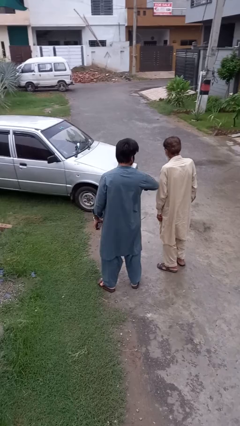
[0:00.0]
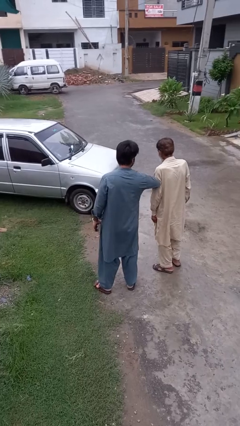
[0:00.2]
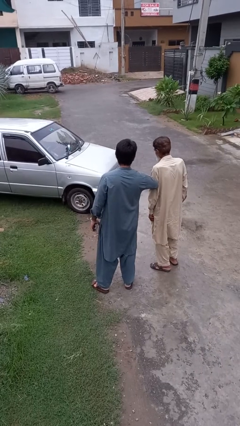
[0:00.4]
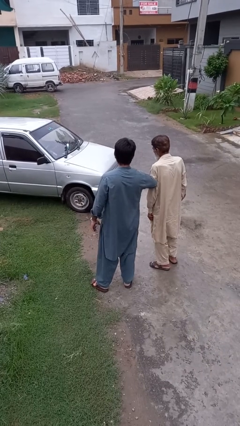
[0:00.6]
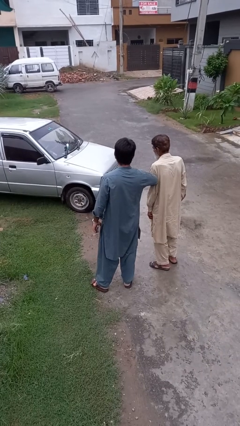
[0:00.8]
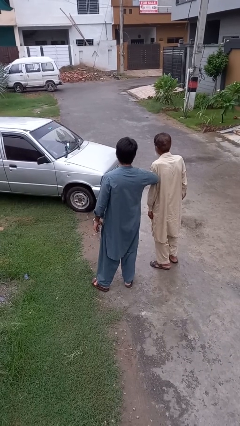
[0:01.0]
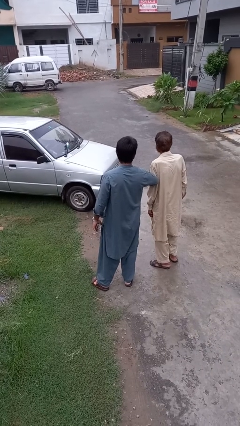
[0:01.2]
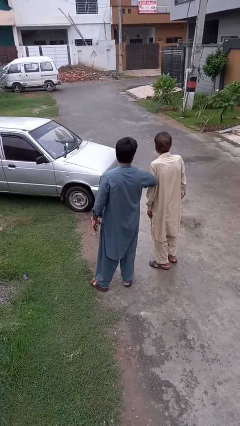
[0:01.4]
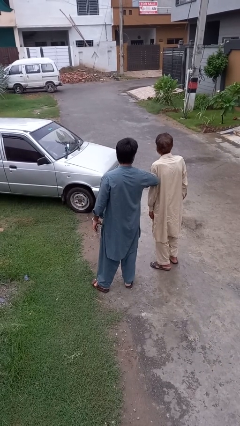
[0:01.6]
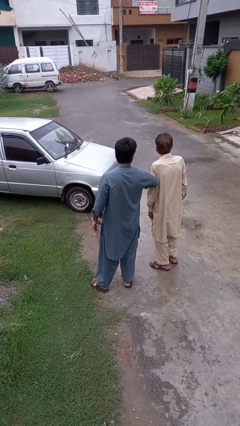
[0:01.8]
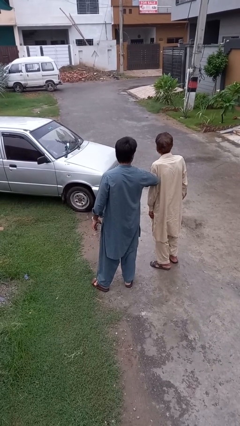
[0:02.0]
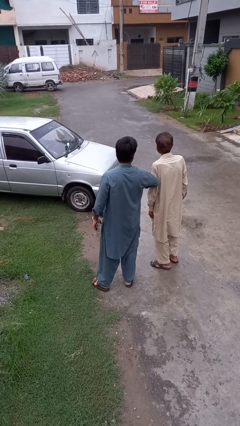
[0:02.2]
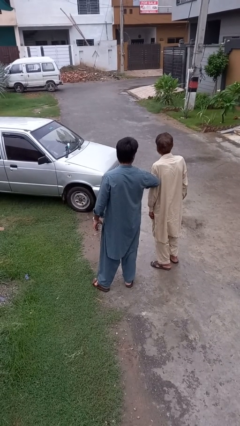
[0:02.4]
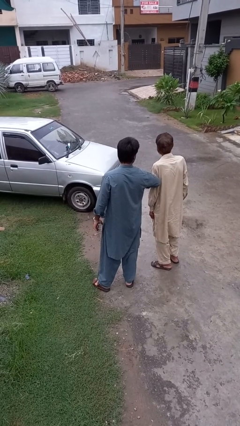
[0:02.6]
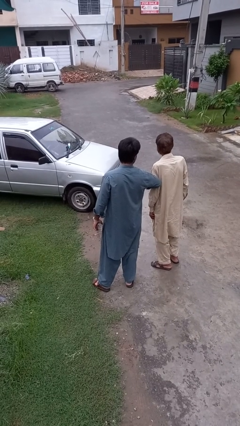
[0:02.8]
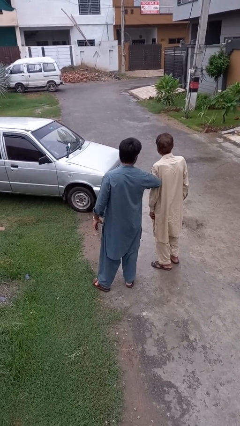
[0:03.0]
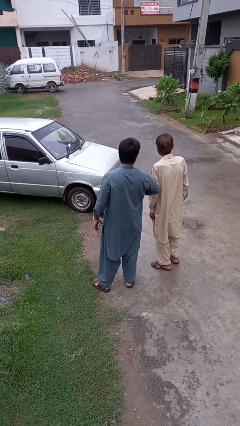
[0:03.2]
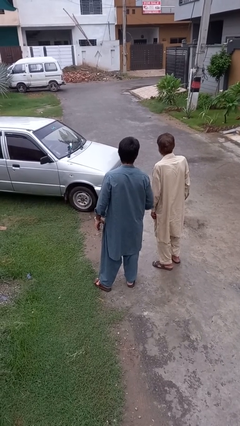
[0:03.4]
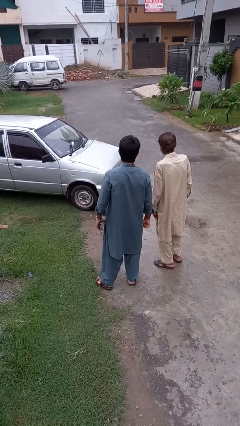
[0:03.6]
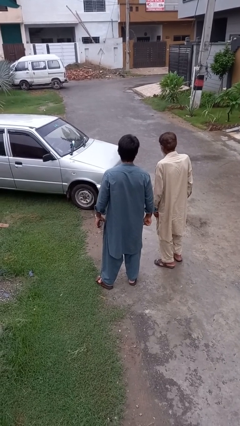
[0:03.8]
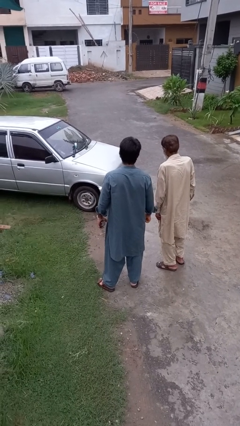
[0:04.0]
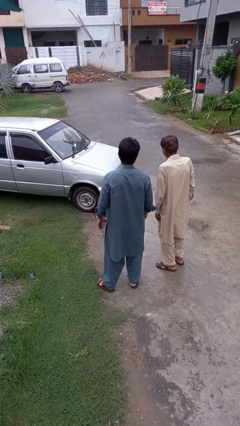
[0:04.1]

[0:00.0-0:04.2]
person nudges person with elbow

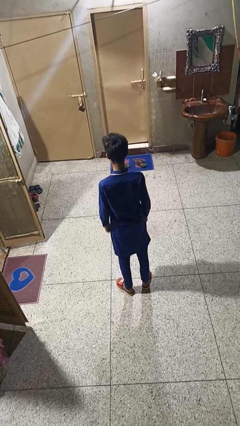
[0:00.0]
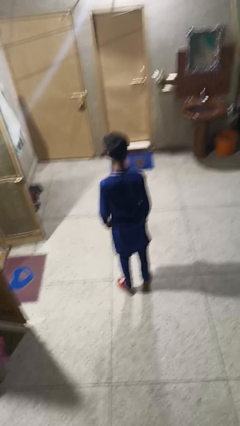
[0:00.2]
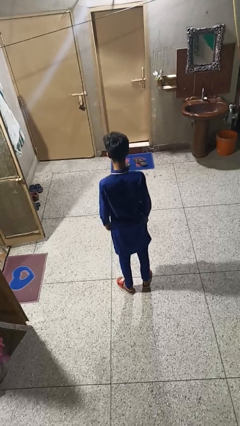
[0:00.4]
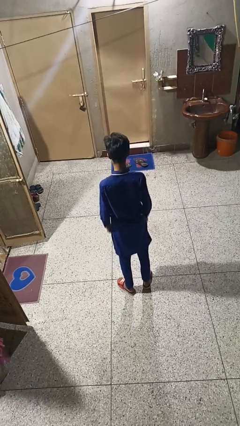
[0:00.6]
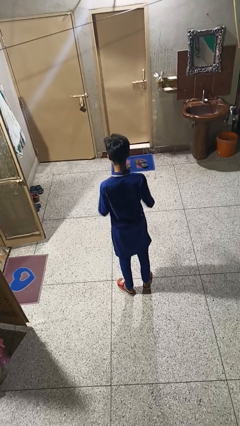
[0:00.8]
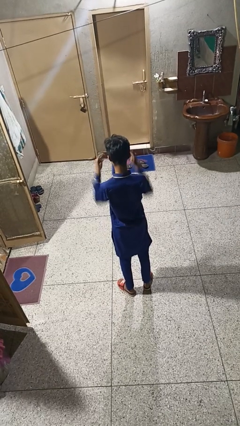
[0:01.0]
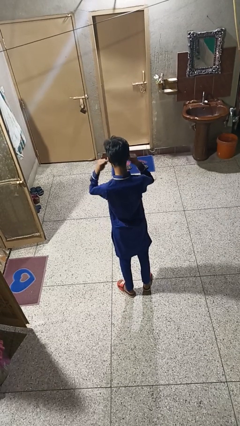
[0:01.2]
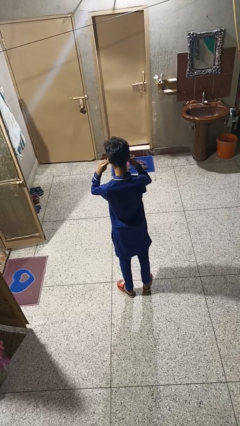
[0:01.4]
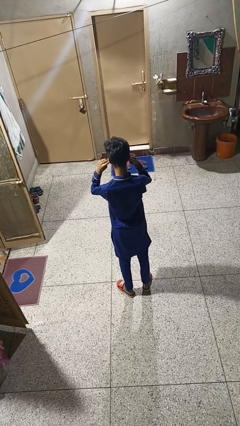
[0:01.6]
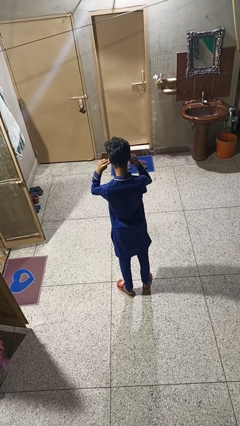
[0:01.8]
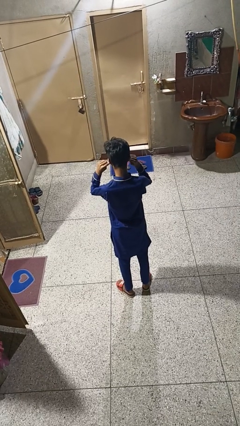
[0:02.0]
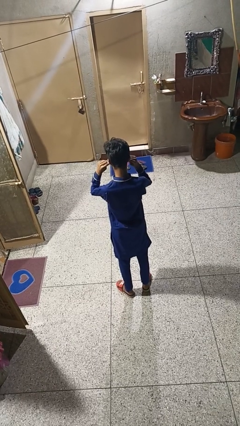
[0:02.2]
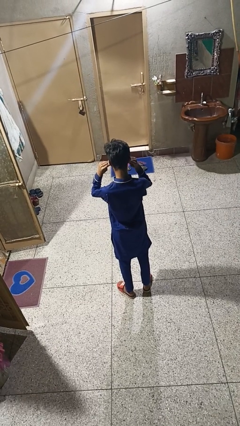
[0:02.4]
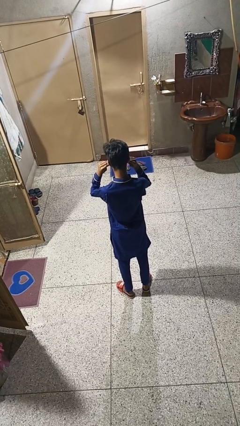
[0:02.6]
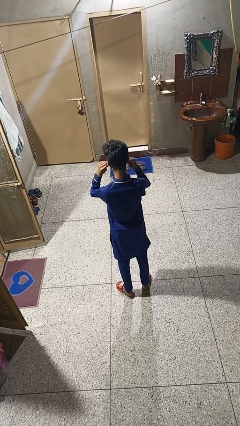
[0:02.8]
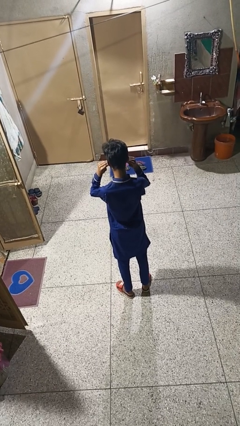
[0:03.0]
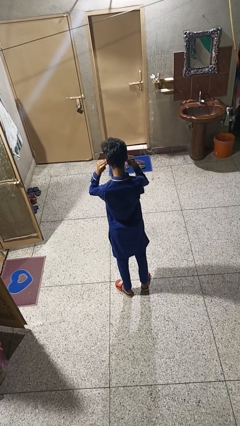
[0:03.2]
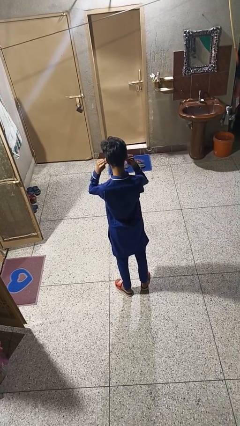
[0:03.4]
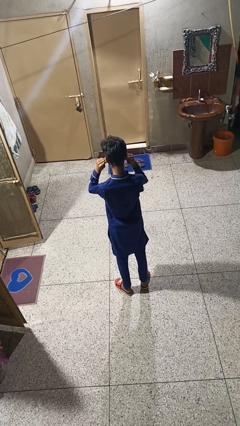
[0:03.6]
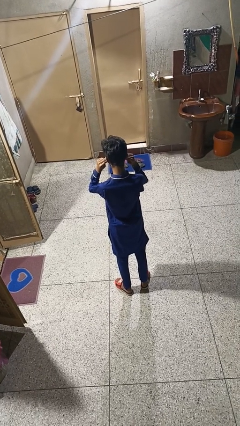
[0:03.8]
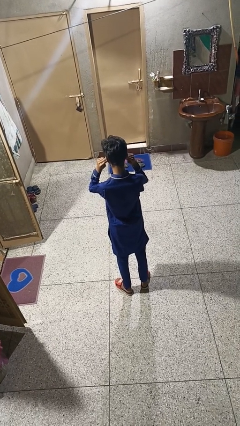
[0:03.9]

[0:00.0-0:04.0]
person puts fingers in ear

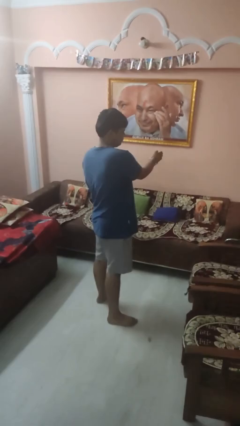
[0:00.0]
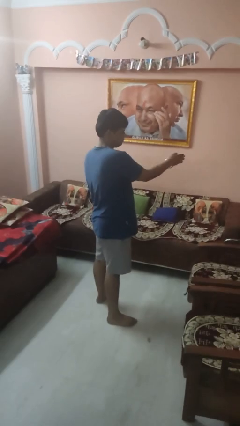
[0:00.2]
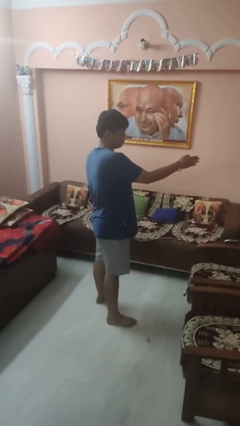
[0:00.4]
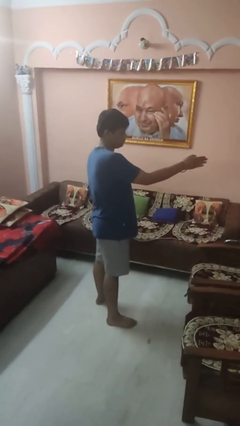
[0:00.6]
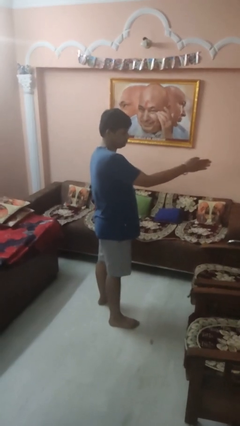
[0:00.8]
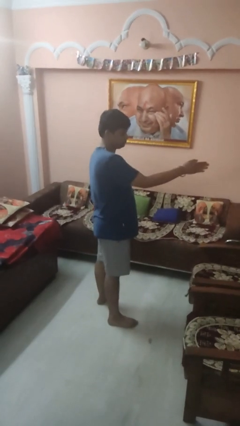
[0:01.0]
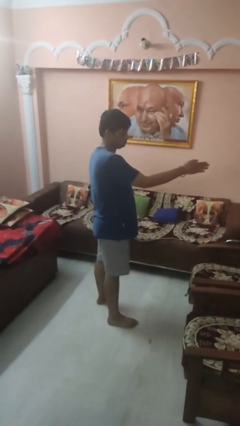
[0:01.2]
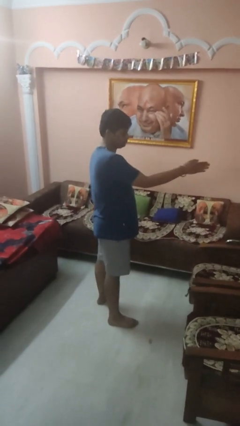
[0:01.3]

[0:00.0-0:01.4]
person gestures swipe right

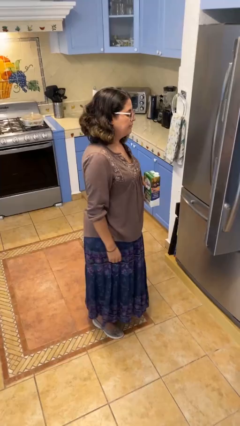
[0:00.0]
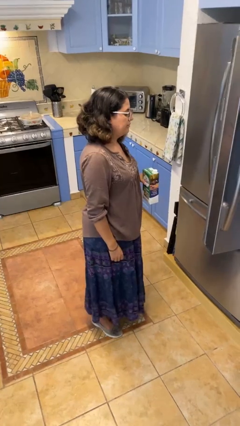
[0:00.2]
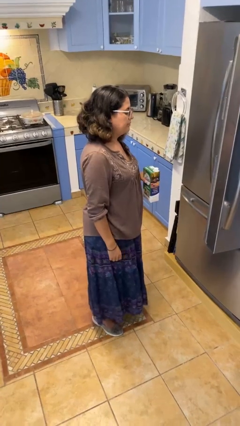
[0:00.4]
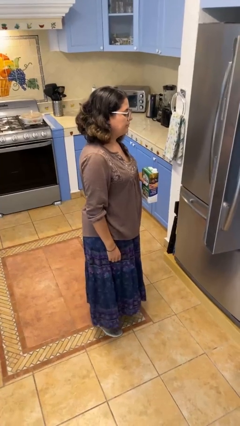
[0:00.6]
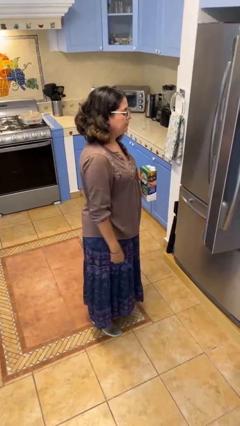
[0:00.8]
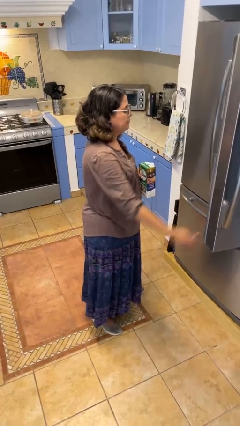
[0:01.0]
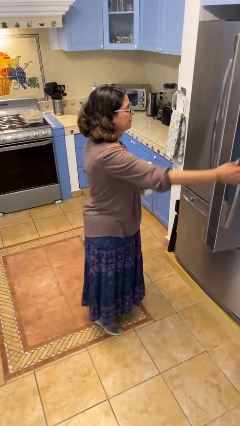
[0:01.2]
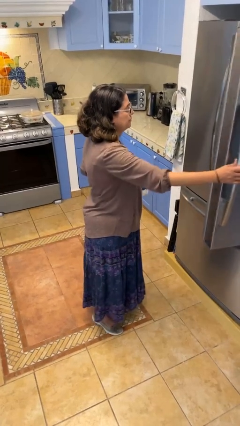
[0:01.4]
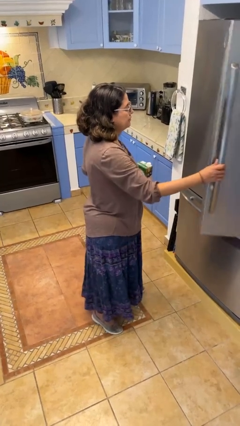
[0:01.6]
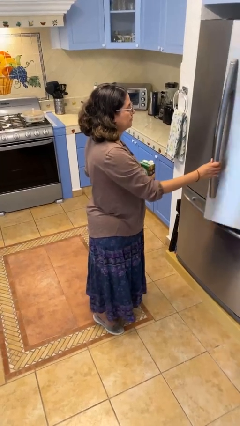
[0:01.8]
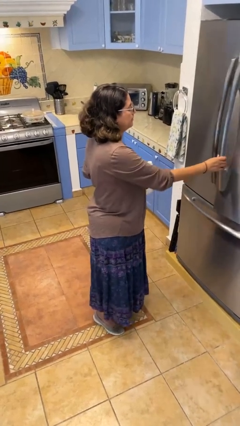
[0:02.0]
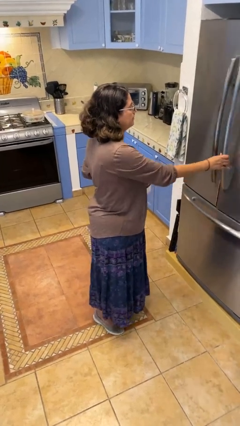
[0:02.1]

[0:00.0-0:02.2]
person closes refrigerator

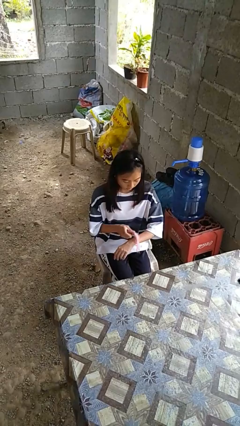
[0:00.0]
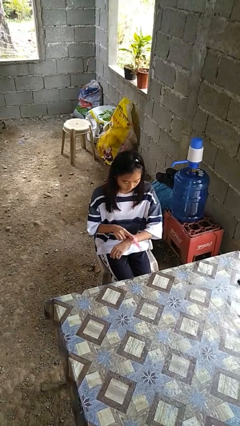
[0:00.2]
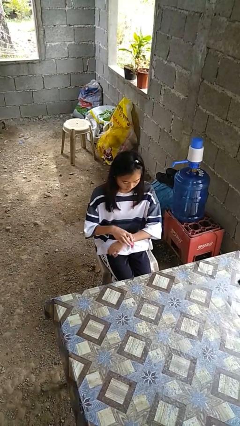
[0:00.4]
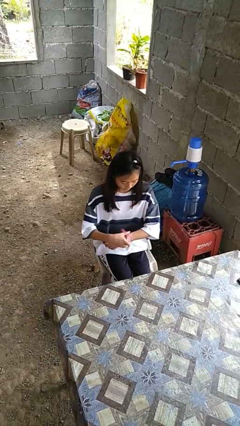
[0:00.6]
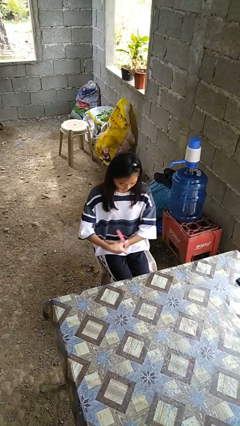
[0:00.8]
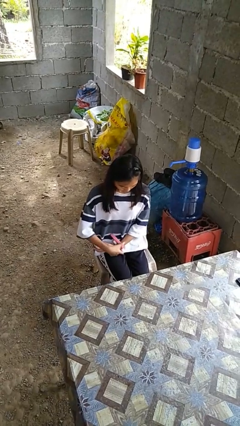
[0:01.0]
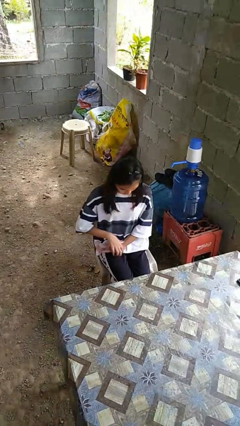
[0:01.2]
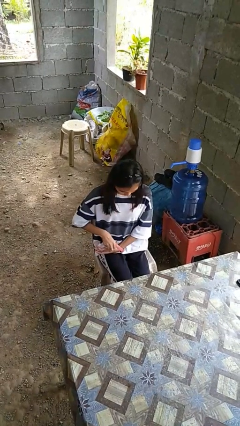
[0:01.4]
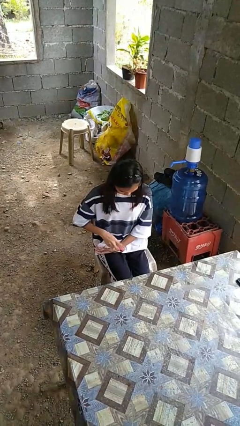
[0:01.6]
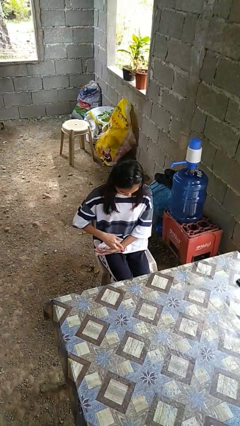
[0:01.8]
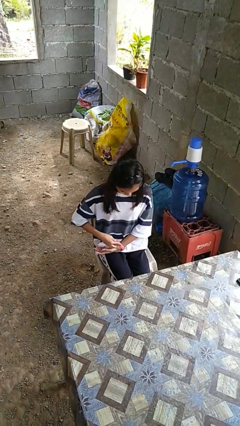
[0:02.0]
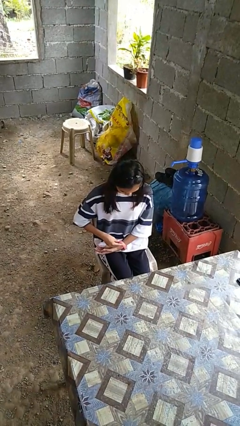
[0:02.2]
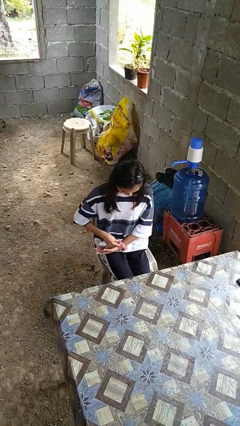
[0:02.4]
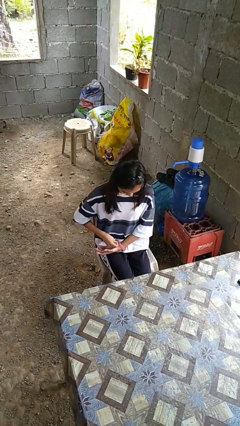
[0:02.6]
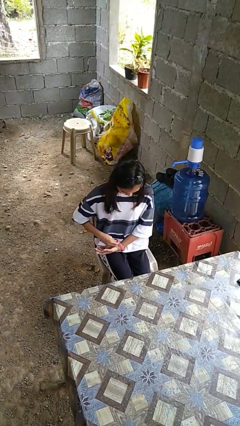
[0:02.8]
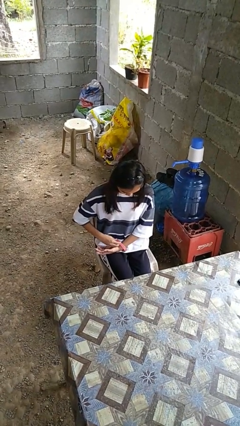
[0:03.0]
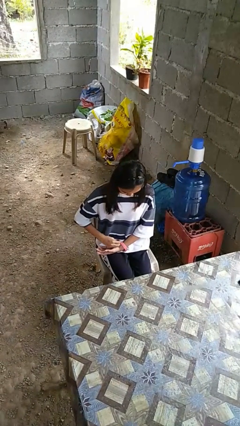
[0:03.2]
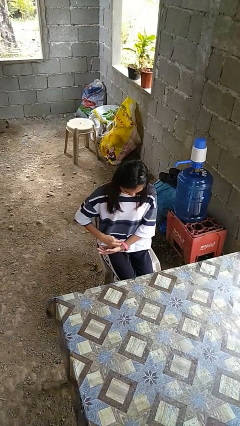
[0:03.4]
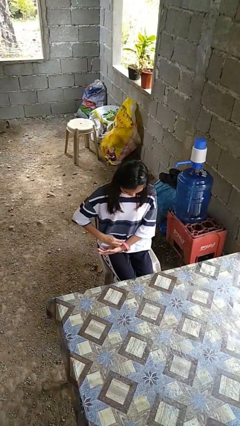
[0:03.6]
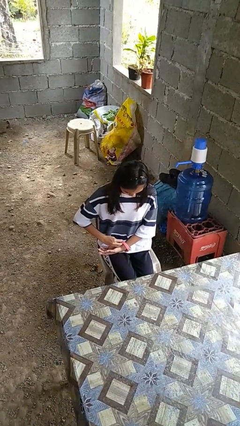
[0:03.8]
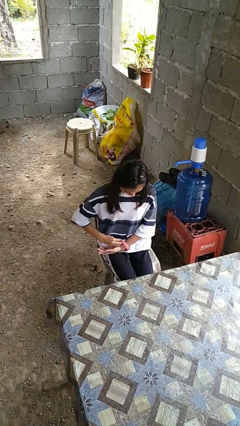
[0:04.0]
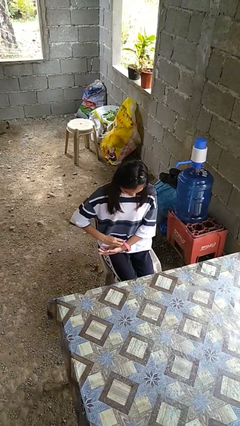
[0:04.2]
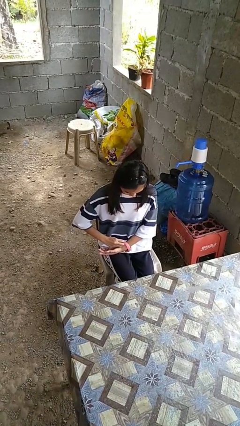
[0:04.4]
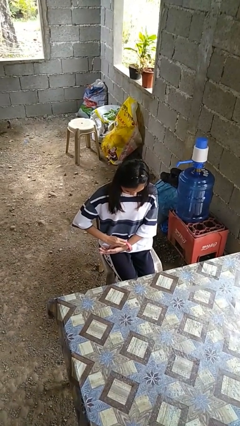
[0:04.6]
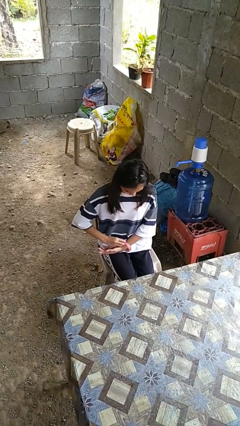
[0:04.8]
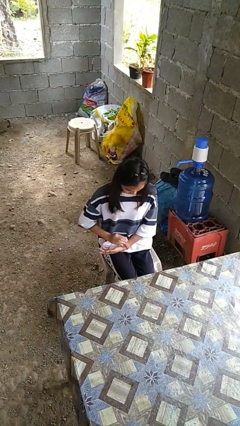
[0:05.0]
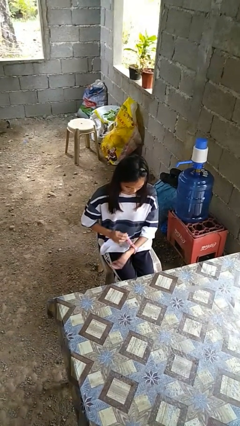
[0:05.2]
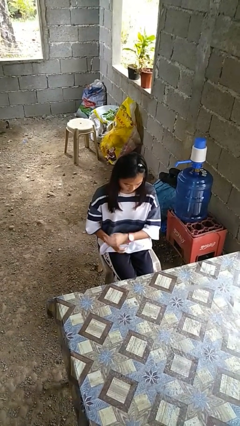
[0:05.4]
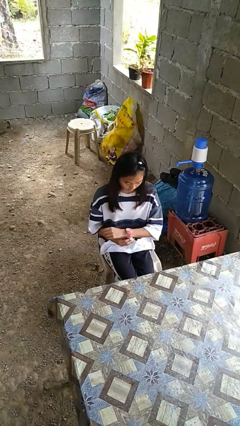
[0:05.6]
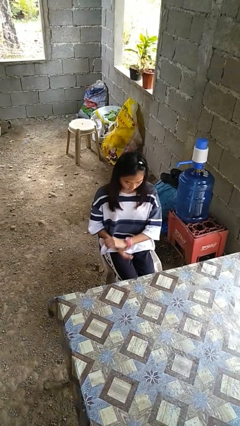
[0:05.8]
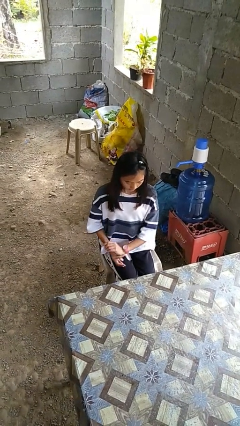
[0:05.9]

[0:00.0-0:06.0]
person puts on wristwatch
